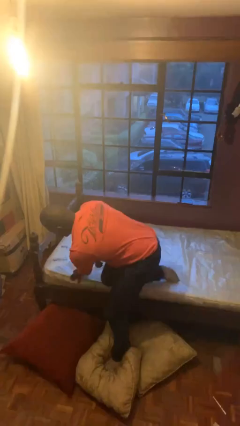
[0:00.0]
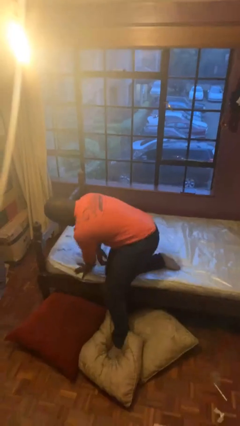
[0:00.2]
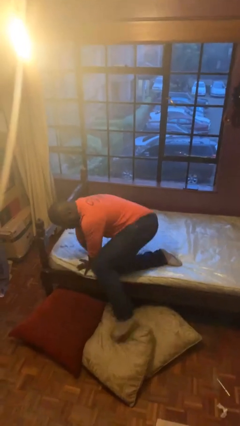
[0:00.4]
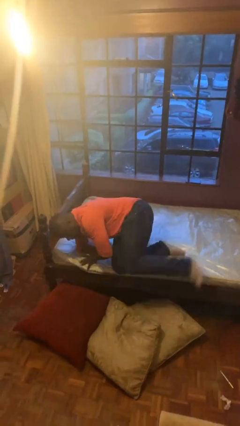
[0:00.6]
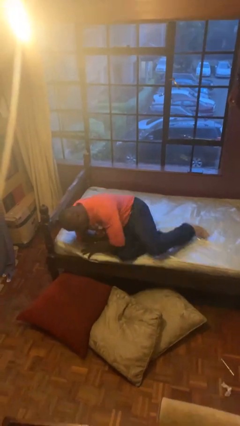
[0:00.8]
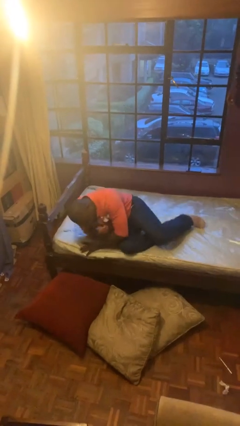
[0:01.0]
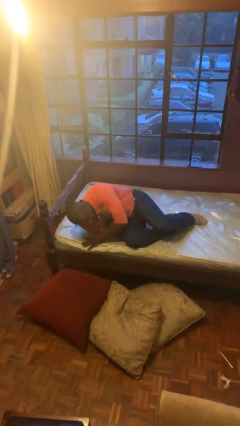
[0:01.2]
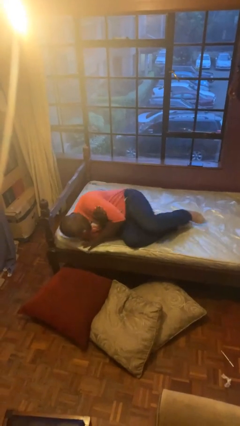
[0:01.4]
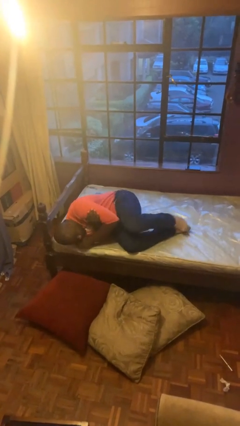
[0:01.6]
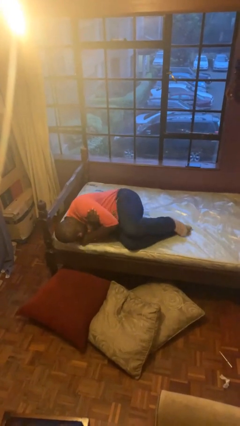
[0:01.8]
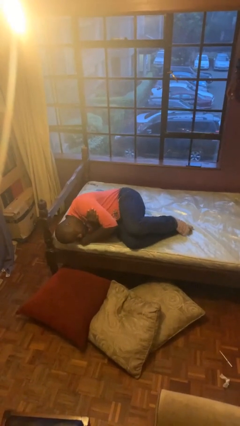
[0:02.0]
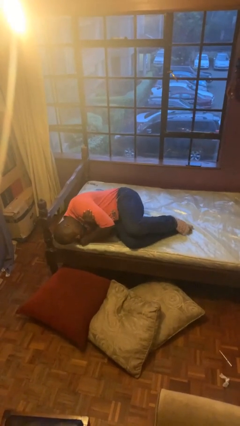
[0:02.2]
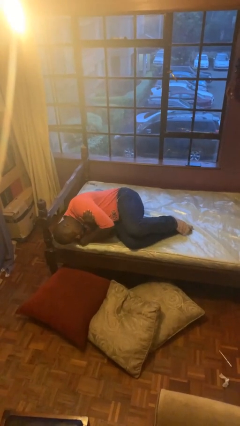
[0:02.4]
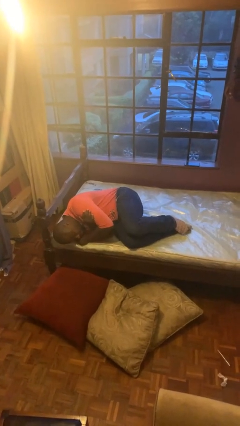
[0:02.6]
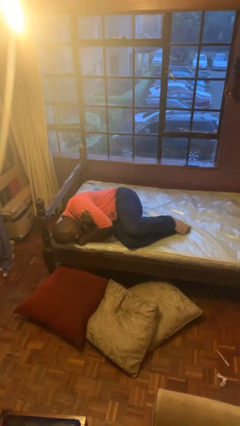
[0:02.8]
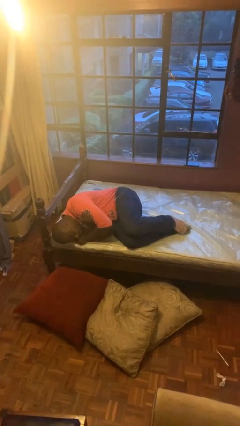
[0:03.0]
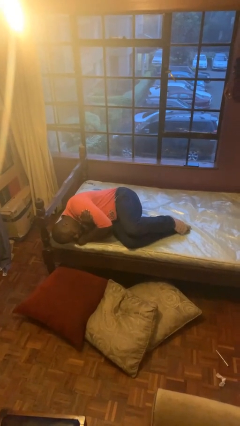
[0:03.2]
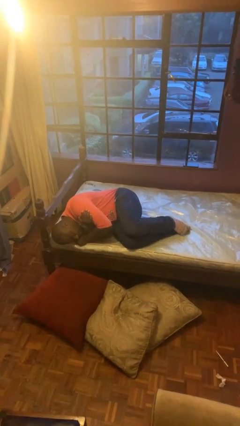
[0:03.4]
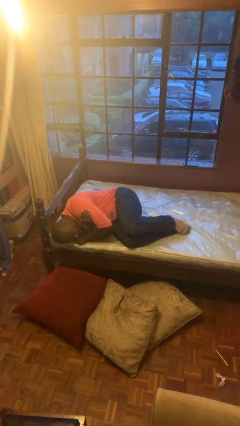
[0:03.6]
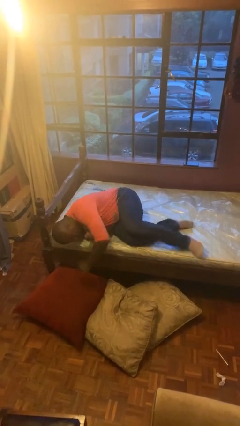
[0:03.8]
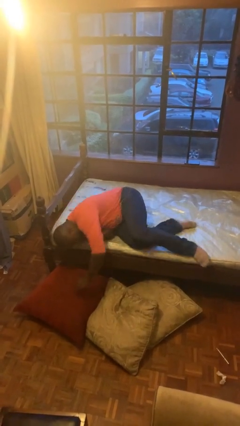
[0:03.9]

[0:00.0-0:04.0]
person lies down on bed

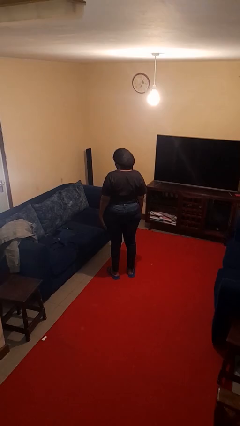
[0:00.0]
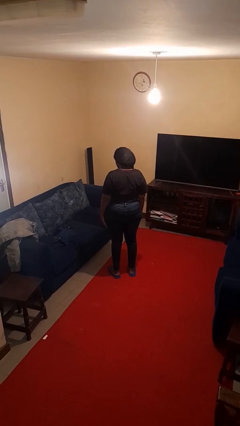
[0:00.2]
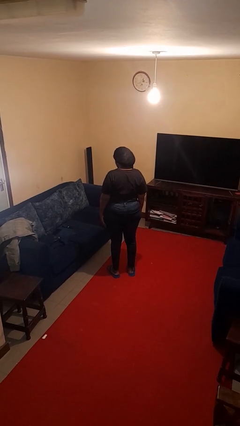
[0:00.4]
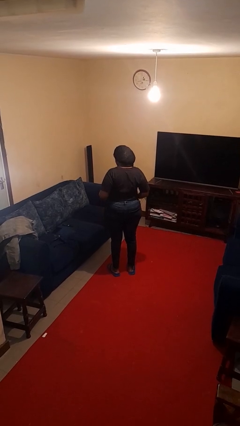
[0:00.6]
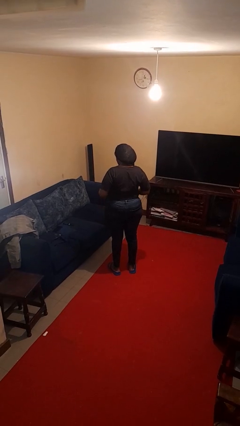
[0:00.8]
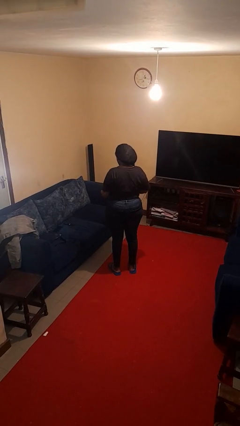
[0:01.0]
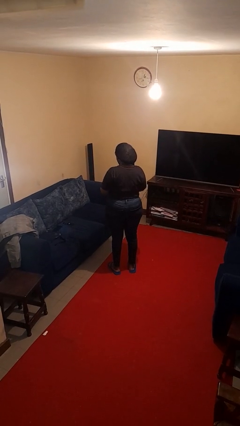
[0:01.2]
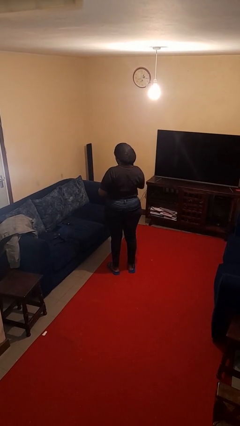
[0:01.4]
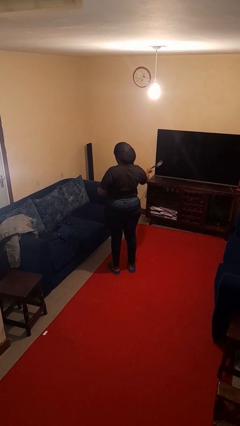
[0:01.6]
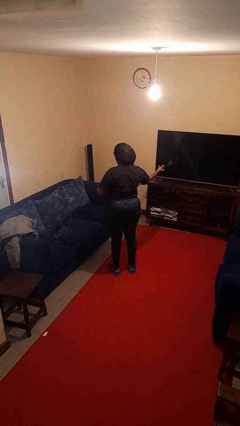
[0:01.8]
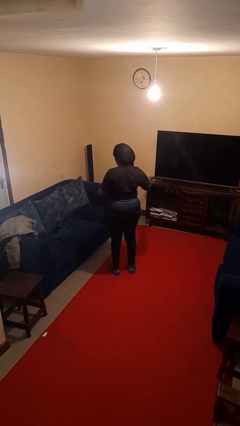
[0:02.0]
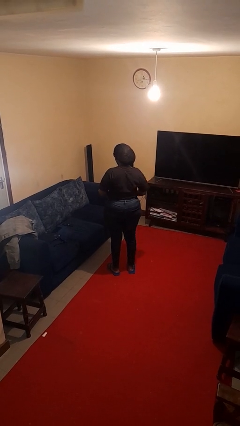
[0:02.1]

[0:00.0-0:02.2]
person takes off belt

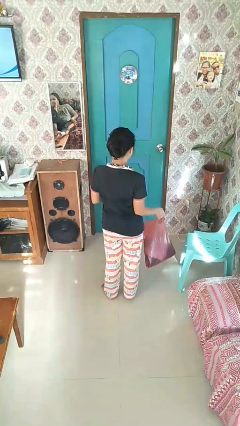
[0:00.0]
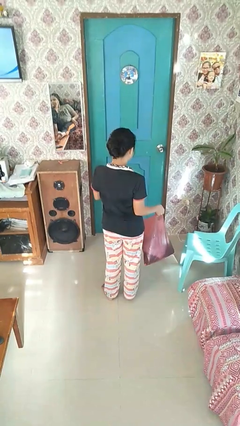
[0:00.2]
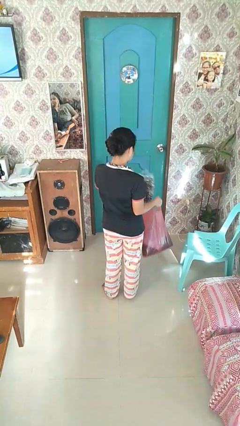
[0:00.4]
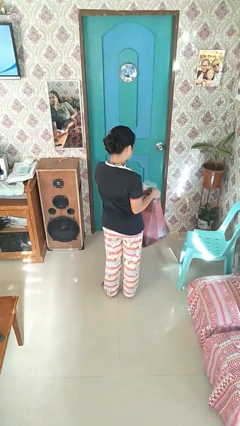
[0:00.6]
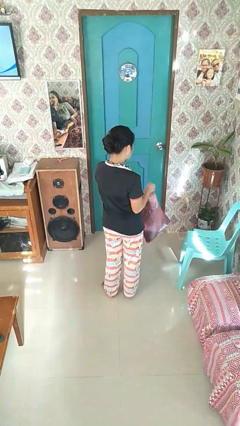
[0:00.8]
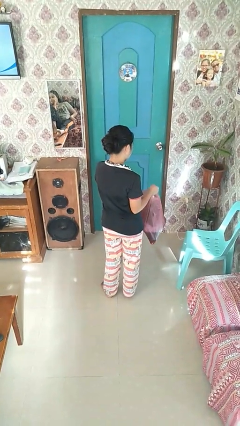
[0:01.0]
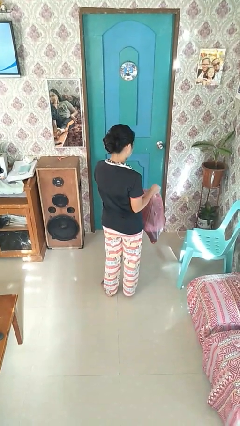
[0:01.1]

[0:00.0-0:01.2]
person puts object into bag

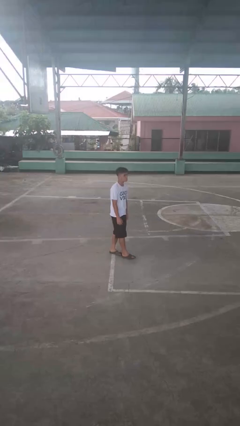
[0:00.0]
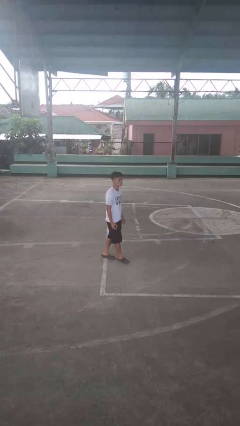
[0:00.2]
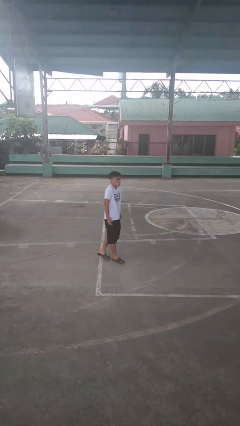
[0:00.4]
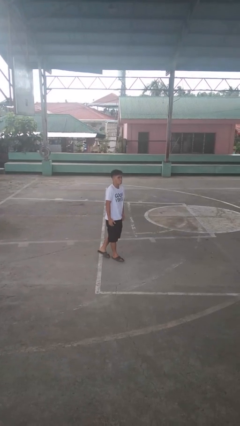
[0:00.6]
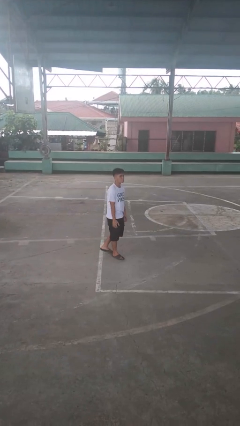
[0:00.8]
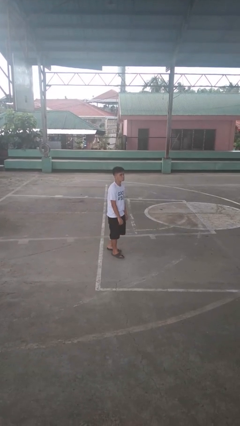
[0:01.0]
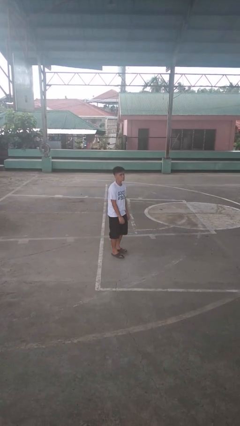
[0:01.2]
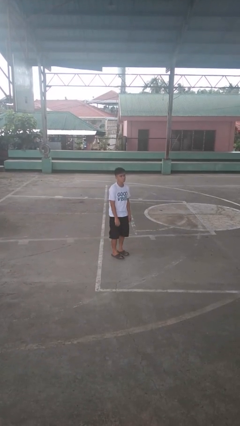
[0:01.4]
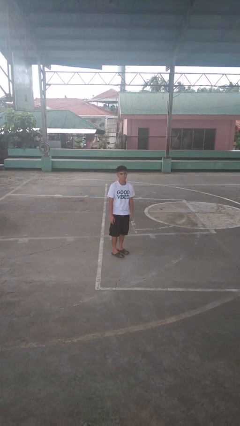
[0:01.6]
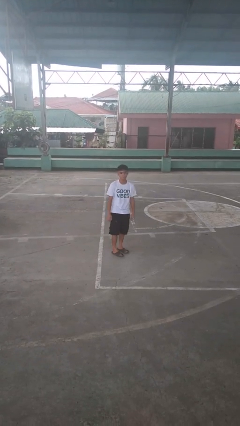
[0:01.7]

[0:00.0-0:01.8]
person shrugs

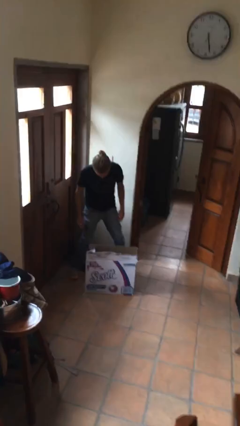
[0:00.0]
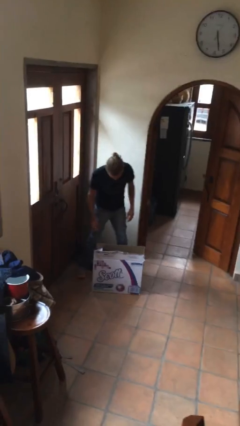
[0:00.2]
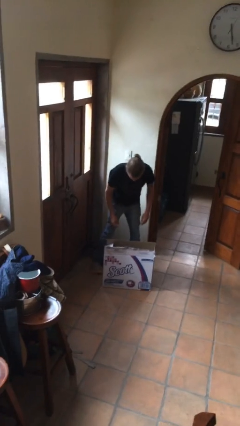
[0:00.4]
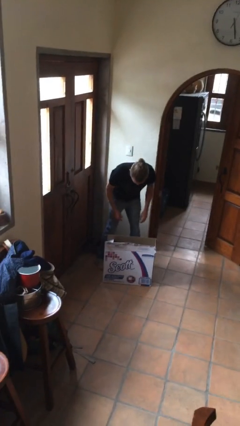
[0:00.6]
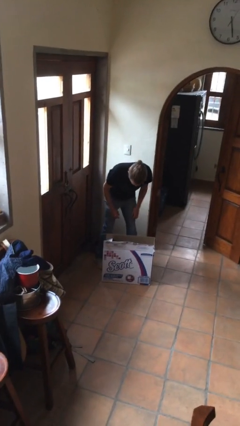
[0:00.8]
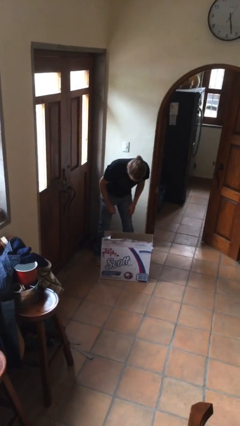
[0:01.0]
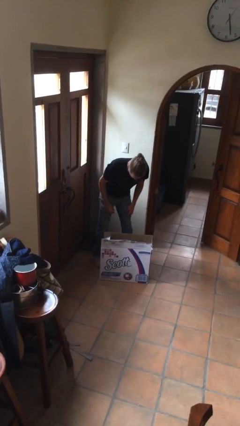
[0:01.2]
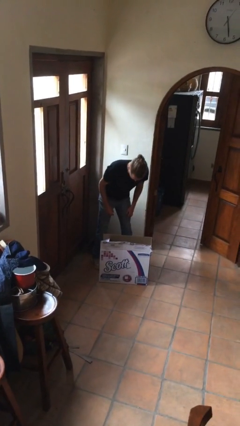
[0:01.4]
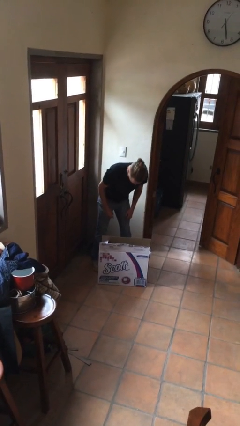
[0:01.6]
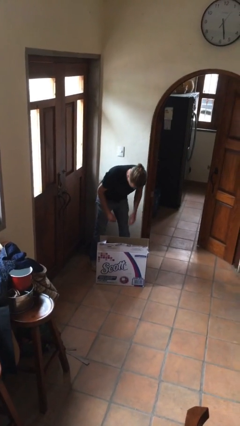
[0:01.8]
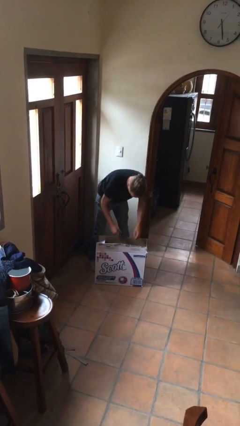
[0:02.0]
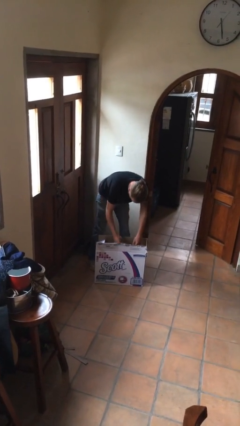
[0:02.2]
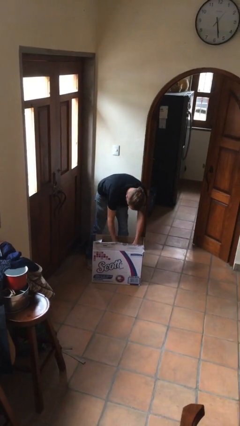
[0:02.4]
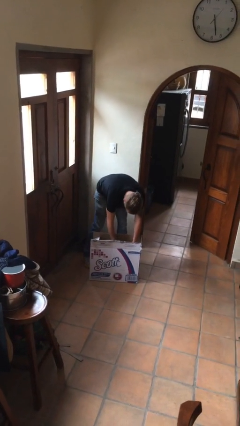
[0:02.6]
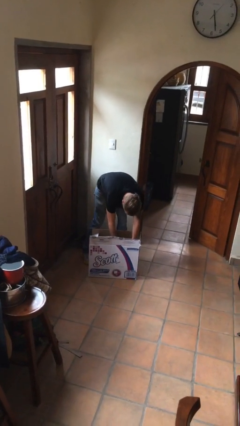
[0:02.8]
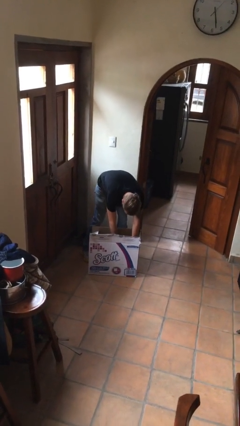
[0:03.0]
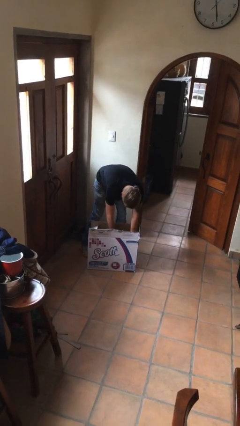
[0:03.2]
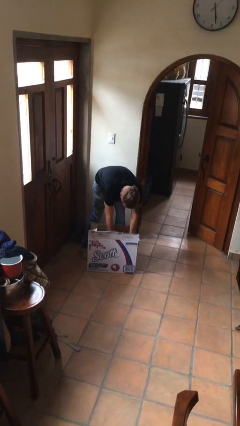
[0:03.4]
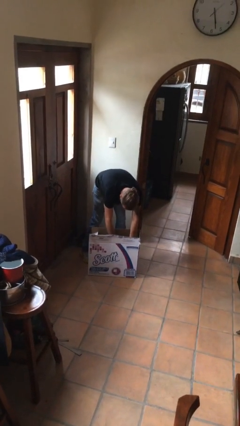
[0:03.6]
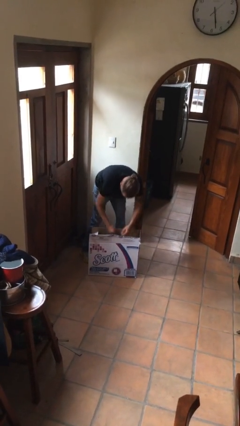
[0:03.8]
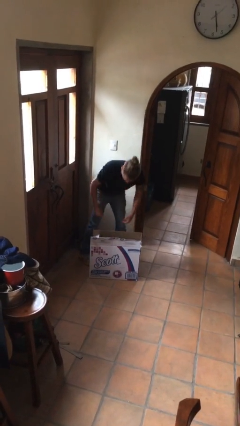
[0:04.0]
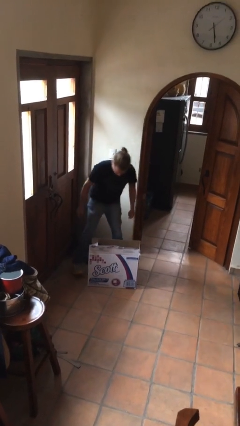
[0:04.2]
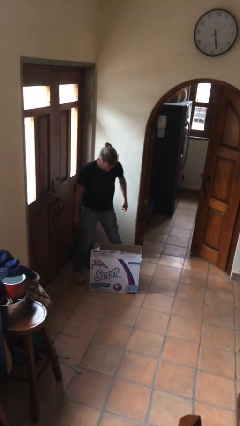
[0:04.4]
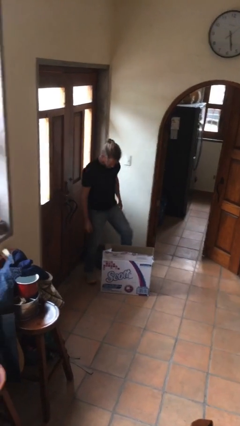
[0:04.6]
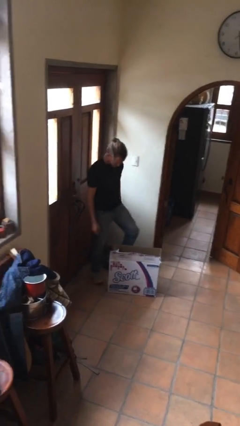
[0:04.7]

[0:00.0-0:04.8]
person searches in box

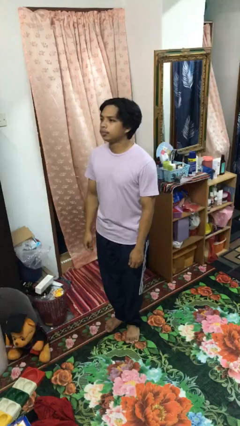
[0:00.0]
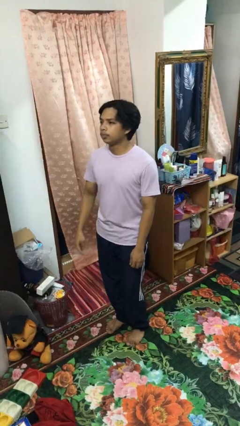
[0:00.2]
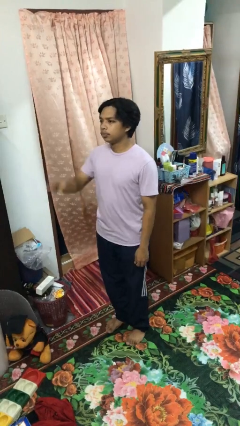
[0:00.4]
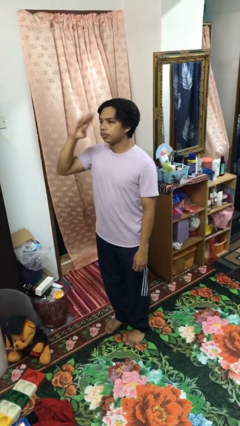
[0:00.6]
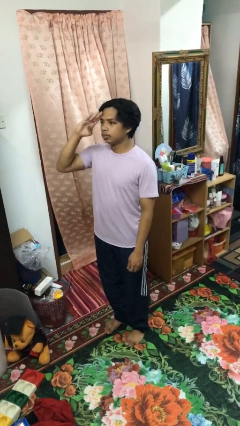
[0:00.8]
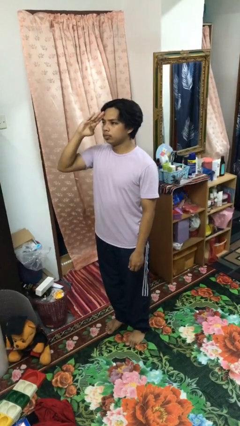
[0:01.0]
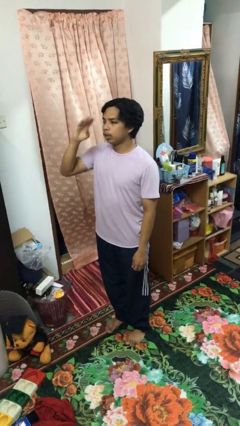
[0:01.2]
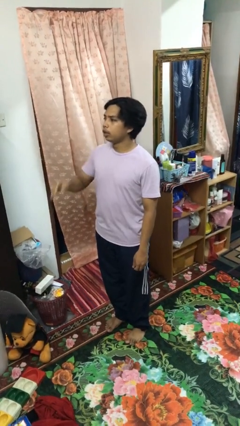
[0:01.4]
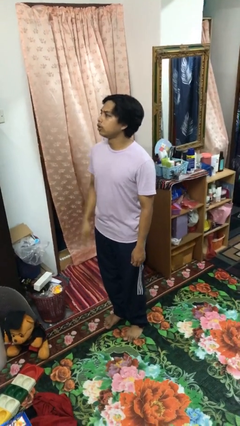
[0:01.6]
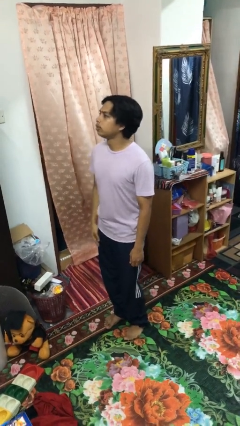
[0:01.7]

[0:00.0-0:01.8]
person salutes

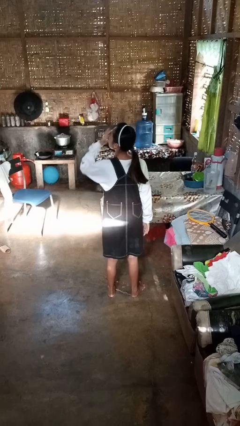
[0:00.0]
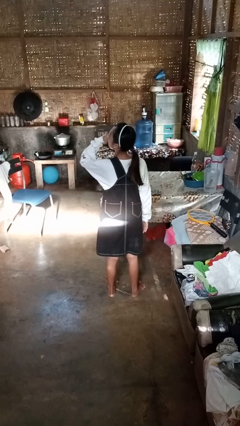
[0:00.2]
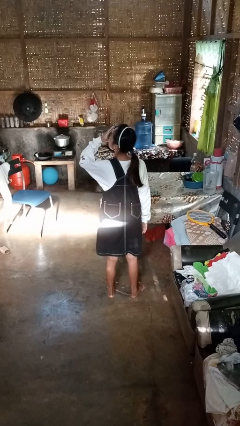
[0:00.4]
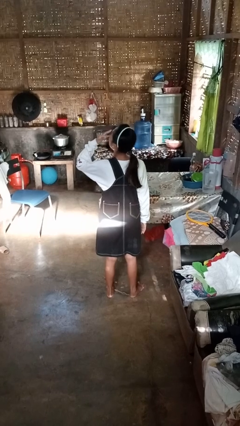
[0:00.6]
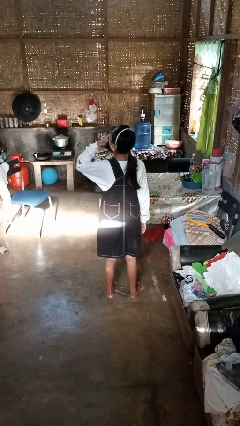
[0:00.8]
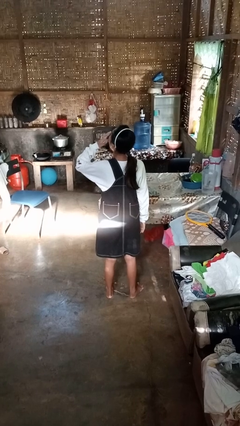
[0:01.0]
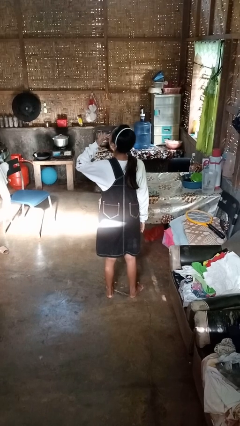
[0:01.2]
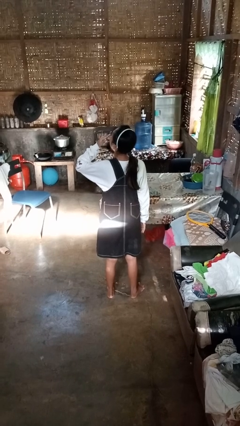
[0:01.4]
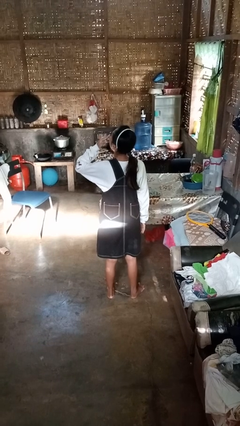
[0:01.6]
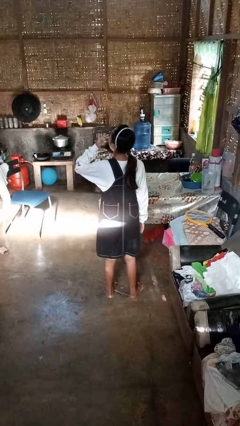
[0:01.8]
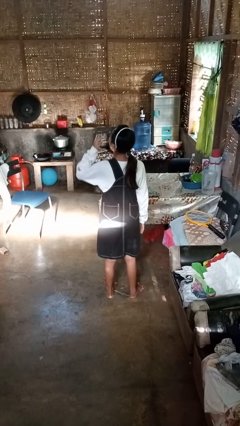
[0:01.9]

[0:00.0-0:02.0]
person licks fingers
